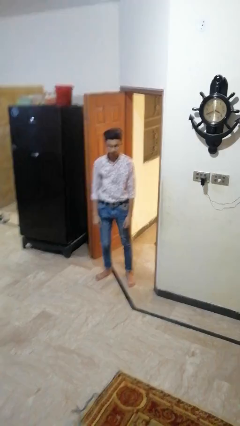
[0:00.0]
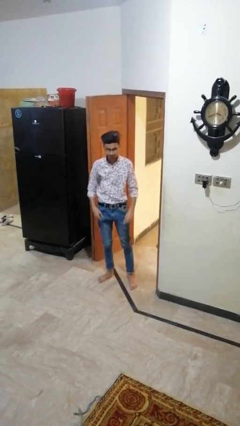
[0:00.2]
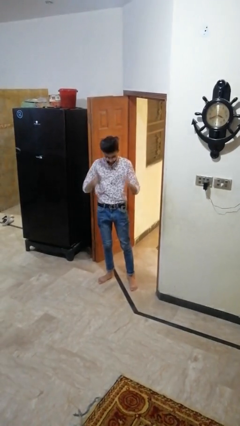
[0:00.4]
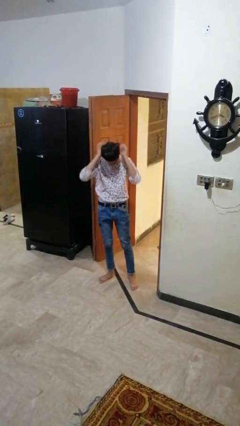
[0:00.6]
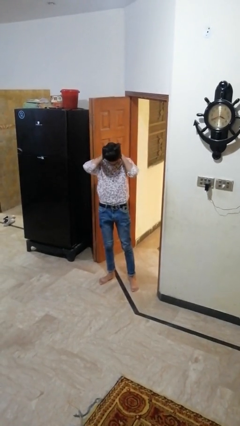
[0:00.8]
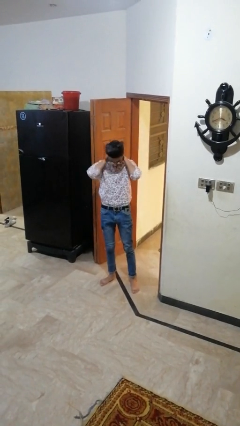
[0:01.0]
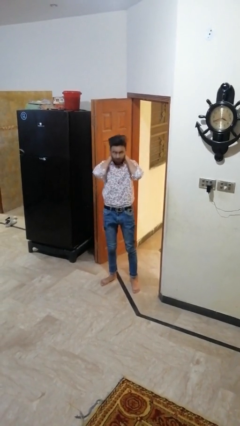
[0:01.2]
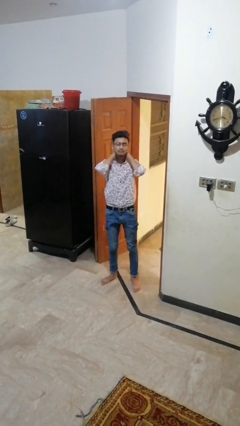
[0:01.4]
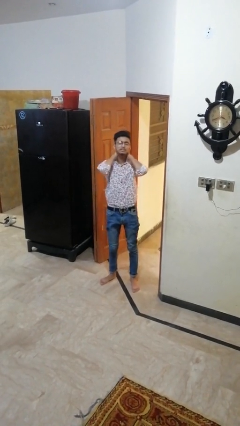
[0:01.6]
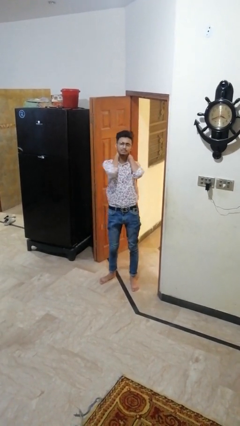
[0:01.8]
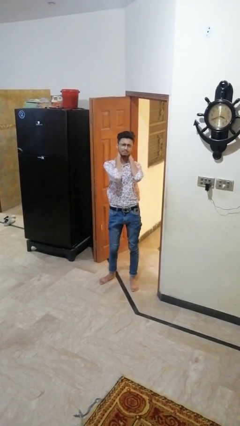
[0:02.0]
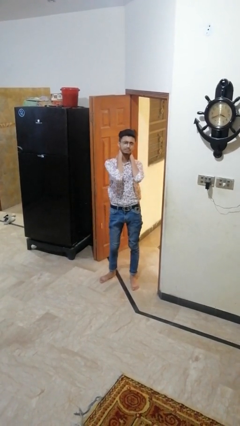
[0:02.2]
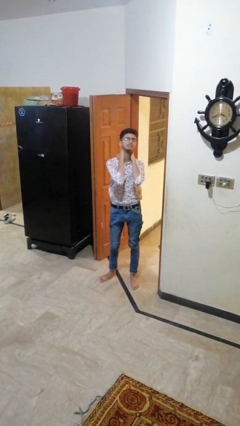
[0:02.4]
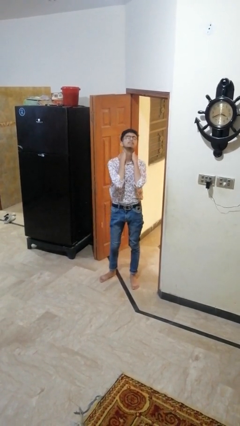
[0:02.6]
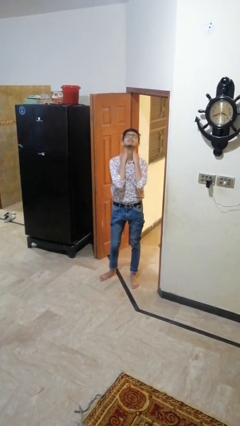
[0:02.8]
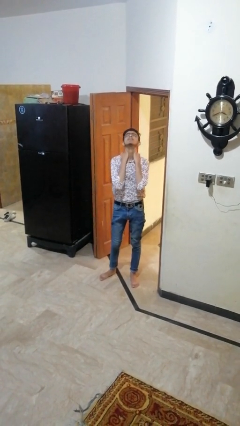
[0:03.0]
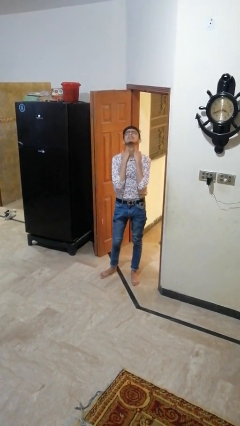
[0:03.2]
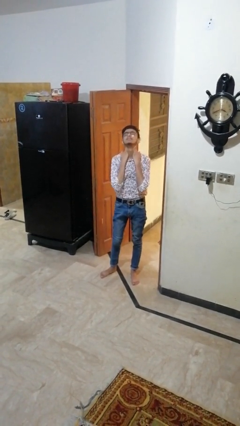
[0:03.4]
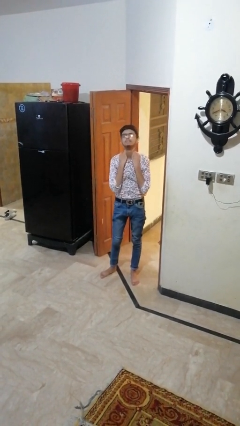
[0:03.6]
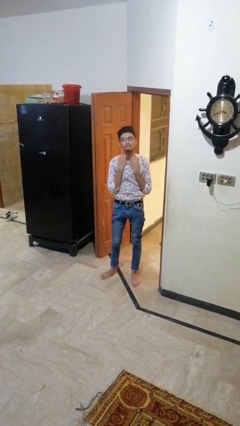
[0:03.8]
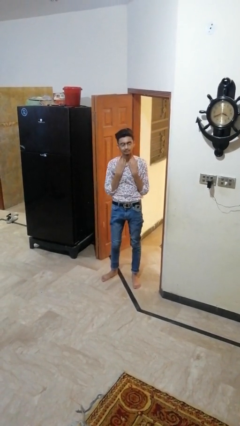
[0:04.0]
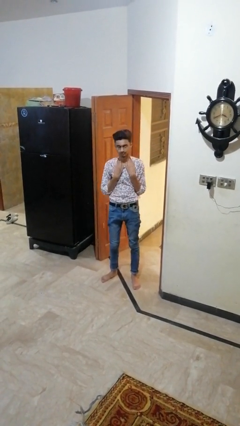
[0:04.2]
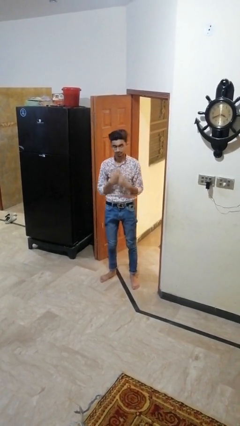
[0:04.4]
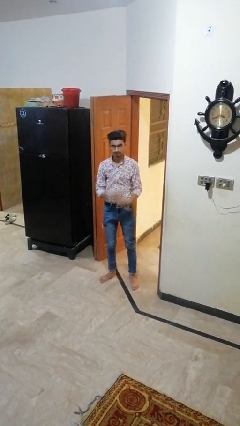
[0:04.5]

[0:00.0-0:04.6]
person rubs neck

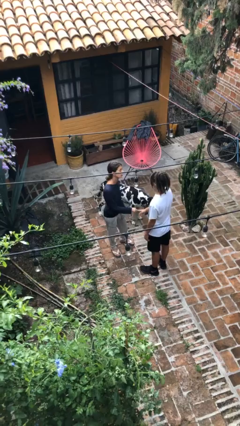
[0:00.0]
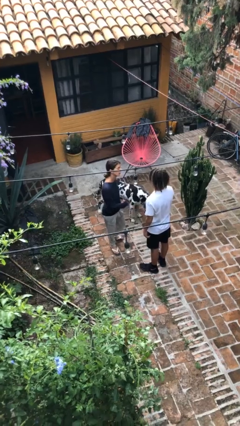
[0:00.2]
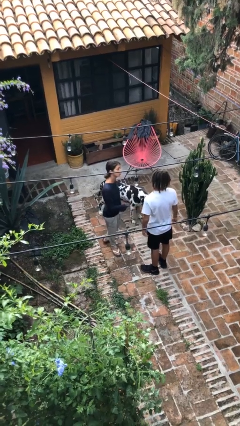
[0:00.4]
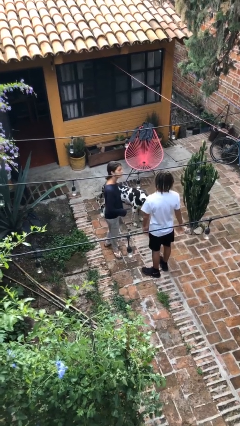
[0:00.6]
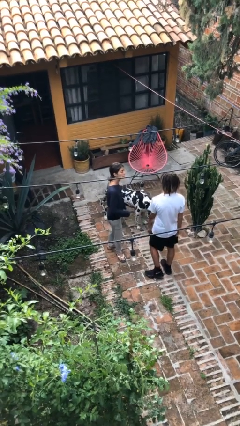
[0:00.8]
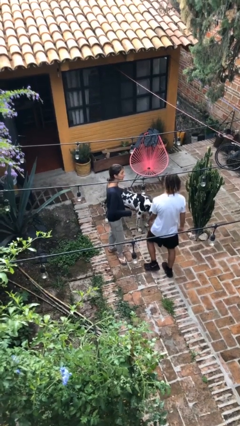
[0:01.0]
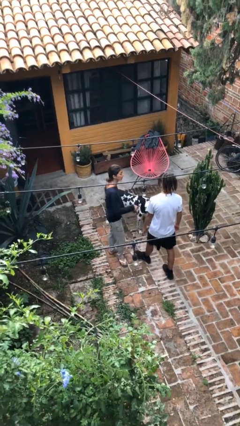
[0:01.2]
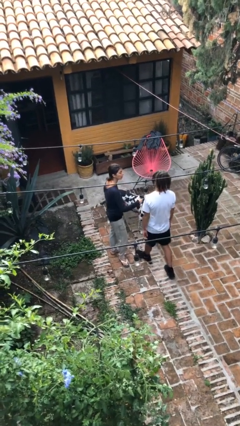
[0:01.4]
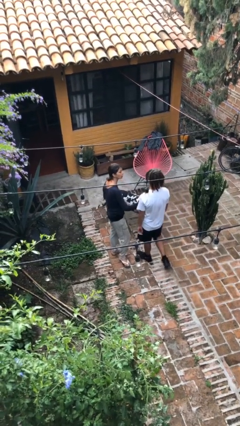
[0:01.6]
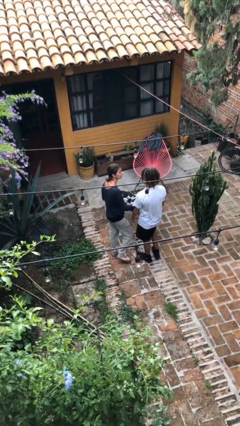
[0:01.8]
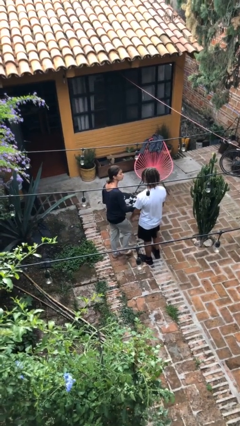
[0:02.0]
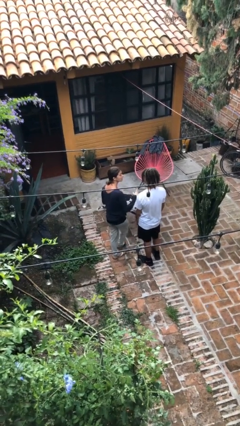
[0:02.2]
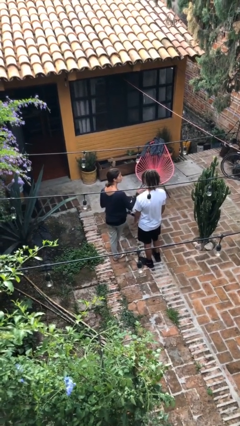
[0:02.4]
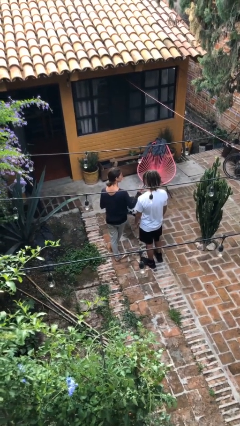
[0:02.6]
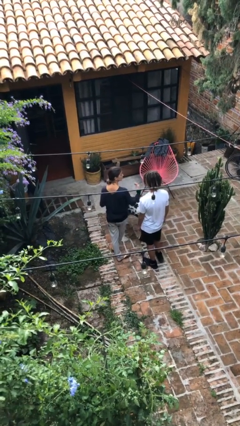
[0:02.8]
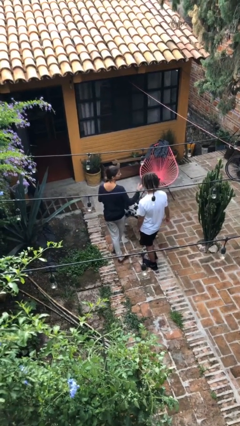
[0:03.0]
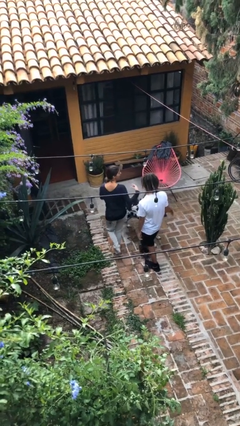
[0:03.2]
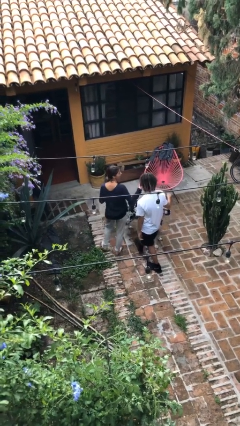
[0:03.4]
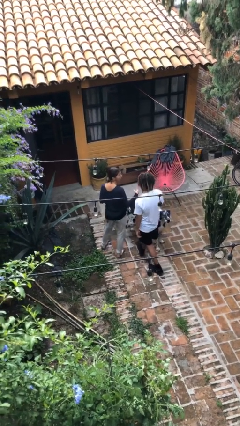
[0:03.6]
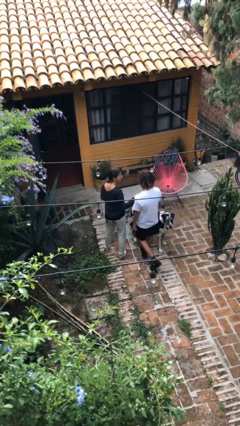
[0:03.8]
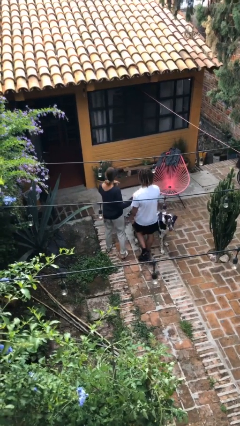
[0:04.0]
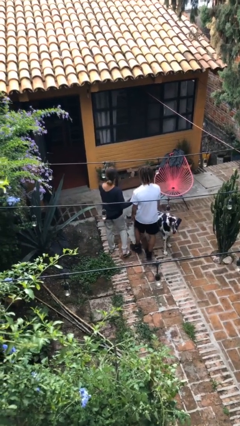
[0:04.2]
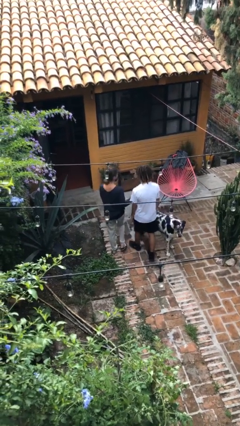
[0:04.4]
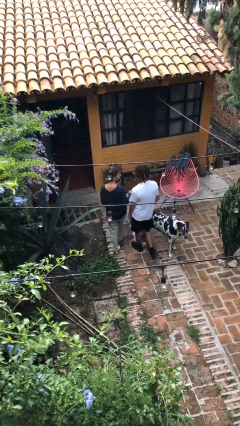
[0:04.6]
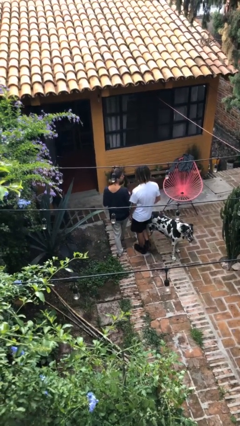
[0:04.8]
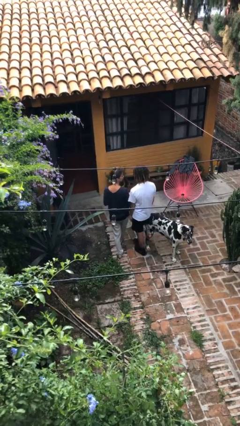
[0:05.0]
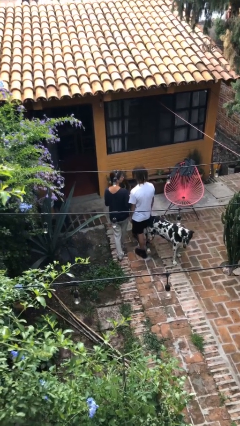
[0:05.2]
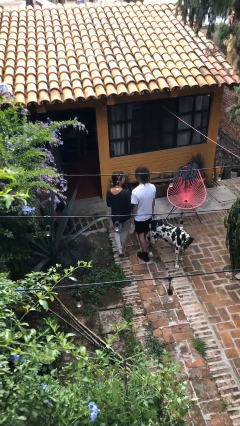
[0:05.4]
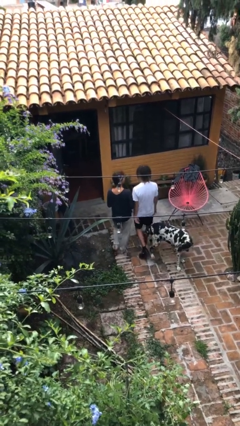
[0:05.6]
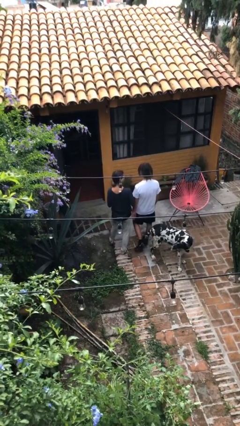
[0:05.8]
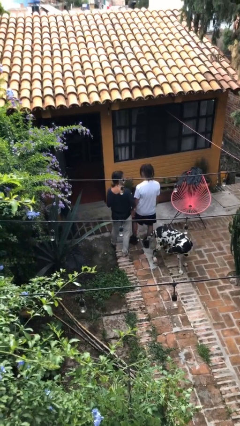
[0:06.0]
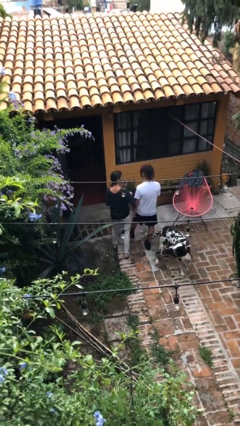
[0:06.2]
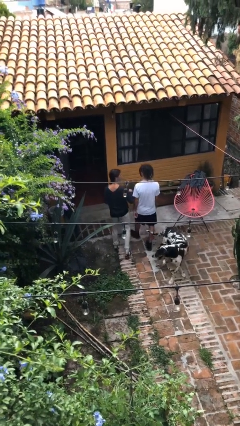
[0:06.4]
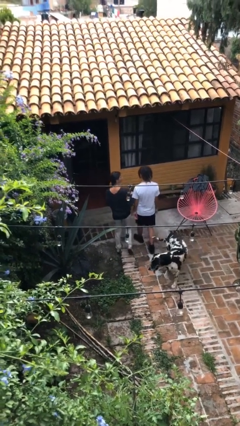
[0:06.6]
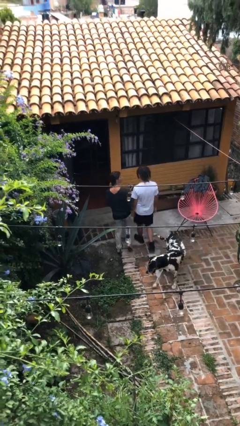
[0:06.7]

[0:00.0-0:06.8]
person talks to person

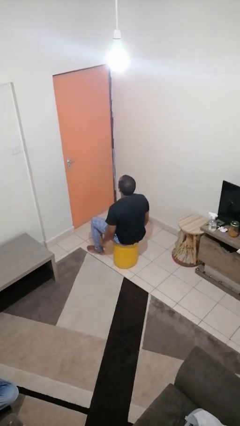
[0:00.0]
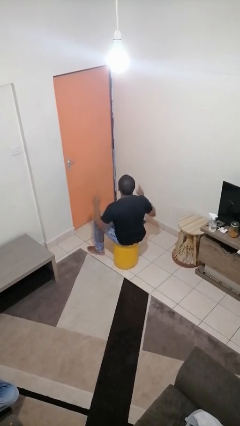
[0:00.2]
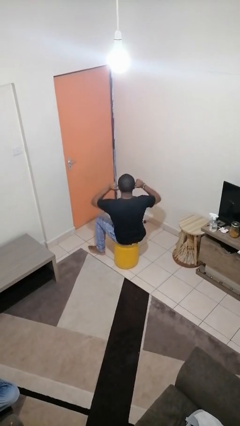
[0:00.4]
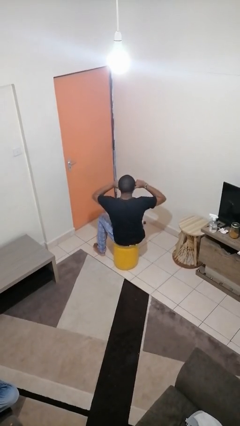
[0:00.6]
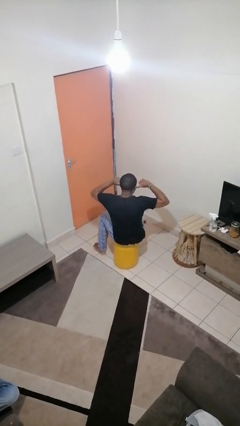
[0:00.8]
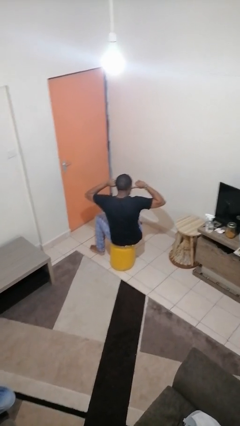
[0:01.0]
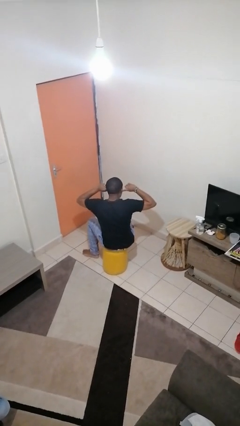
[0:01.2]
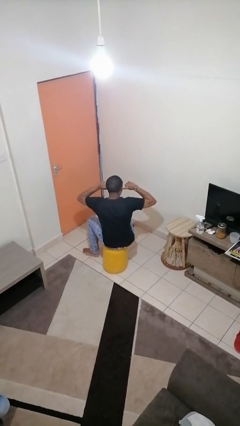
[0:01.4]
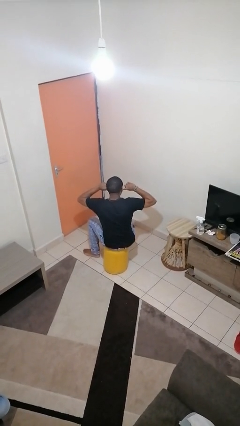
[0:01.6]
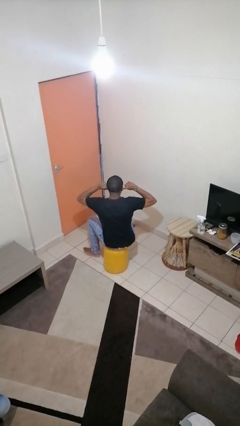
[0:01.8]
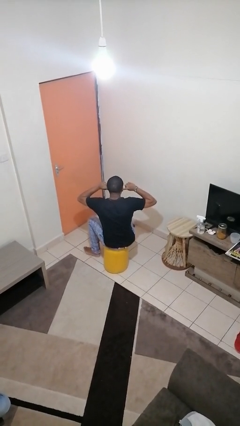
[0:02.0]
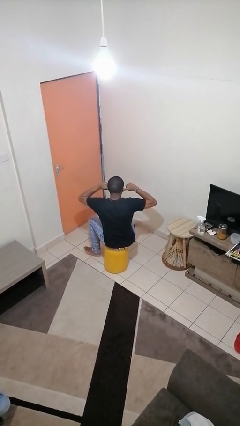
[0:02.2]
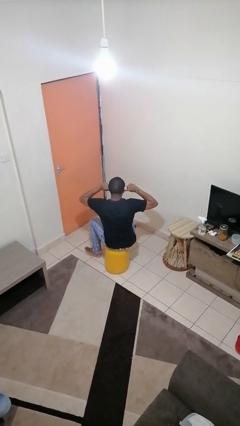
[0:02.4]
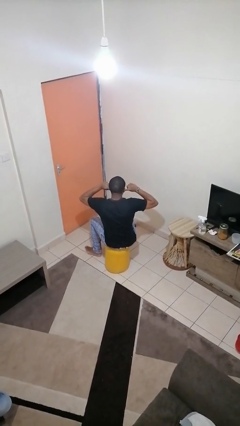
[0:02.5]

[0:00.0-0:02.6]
person puts fingers in ear

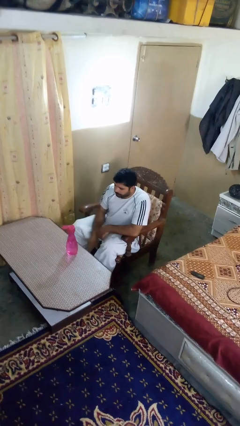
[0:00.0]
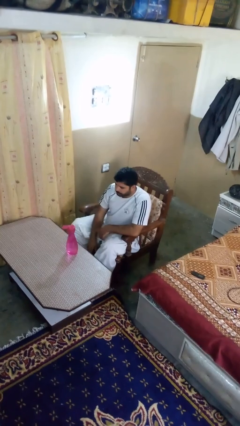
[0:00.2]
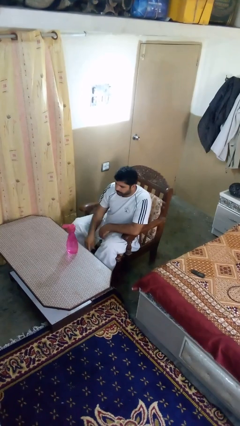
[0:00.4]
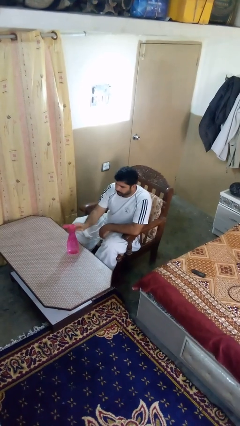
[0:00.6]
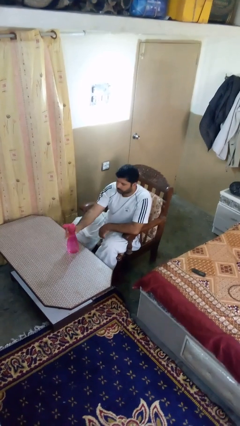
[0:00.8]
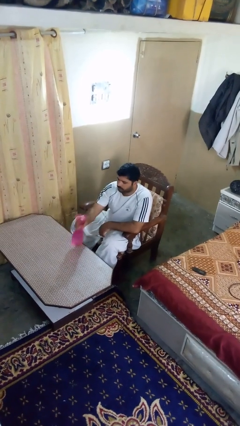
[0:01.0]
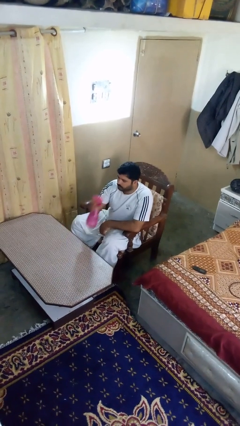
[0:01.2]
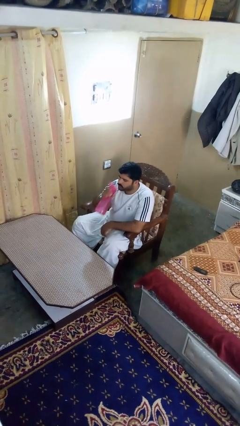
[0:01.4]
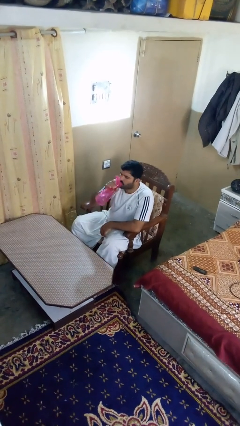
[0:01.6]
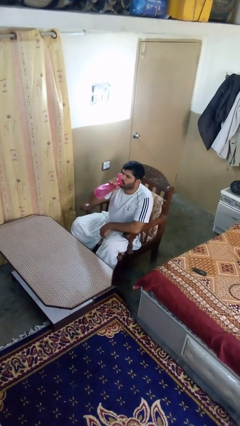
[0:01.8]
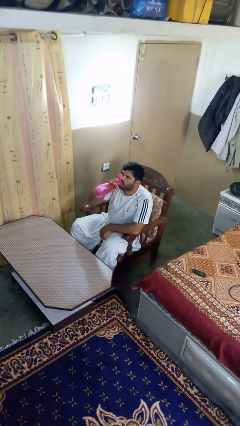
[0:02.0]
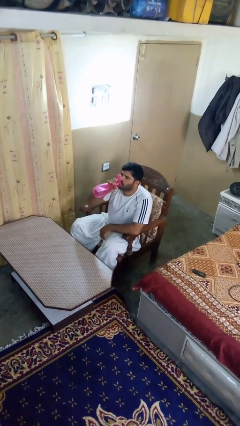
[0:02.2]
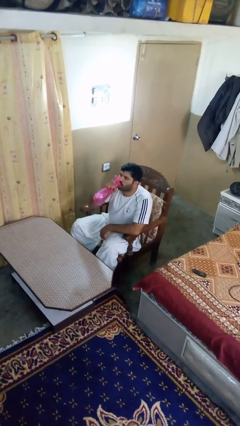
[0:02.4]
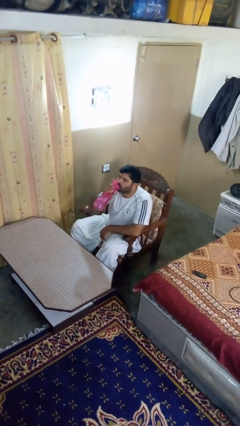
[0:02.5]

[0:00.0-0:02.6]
person drinks from bottle

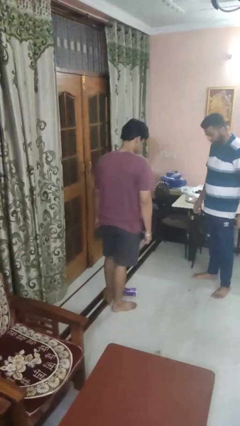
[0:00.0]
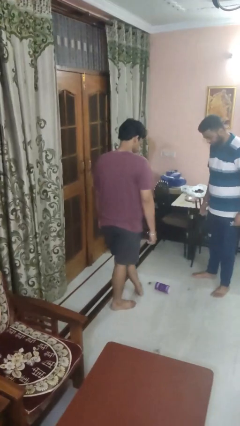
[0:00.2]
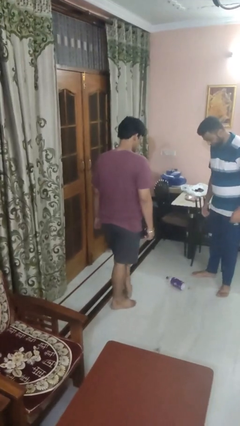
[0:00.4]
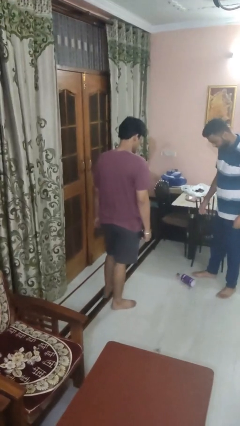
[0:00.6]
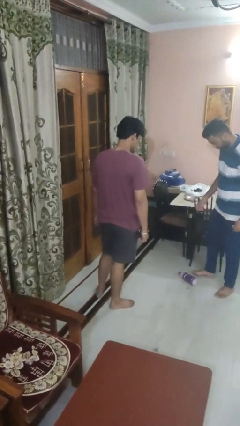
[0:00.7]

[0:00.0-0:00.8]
person kicks object to person

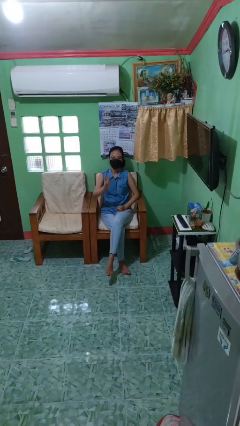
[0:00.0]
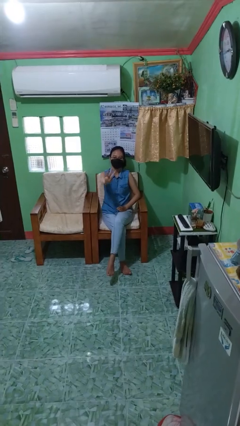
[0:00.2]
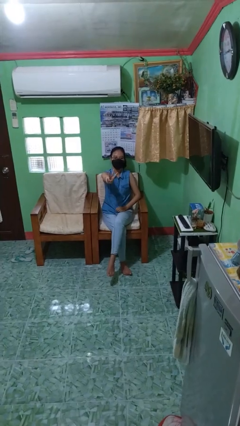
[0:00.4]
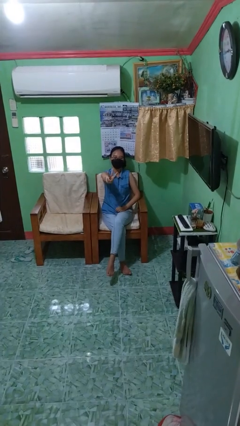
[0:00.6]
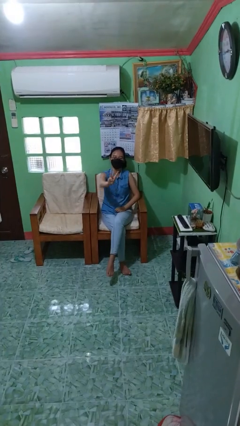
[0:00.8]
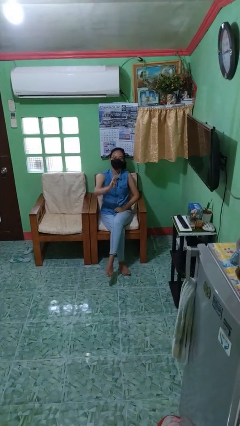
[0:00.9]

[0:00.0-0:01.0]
person gestures number three
